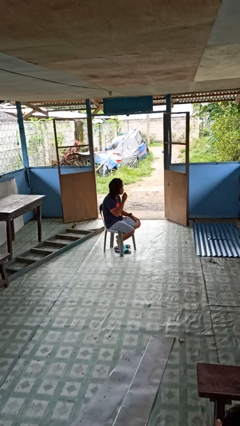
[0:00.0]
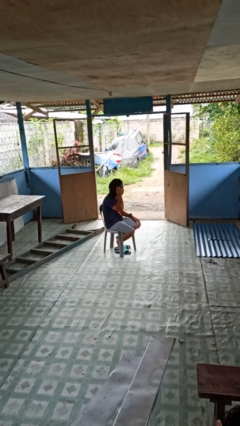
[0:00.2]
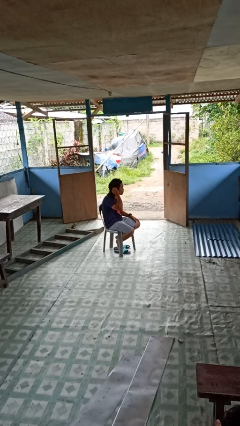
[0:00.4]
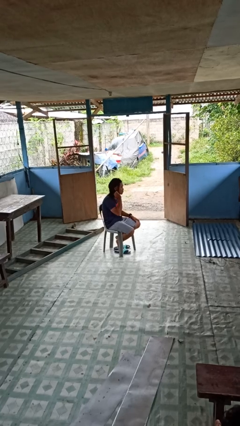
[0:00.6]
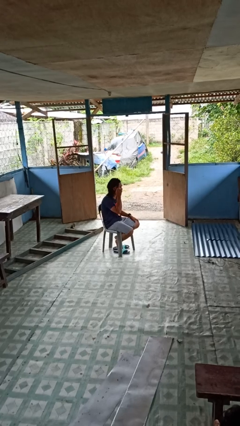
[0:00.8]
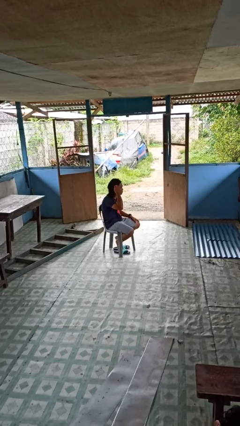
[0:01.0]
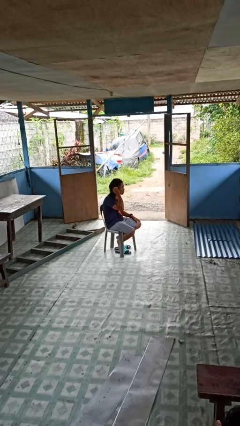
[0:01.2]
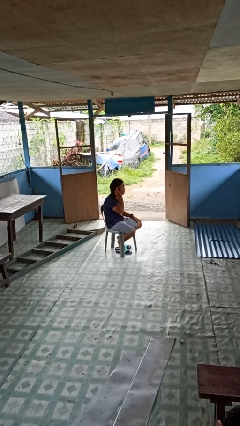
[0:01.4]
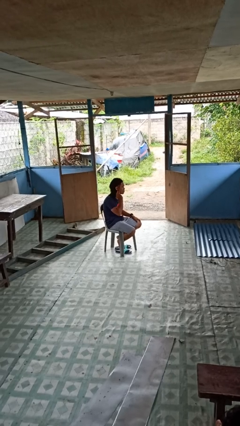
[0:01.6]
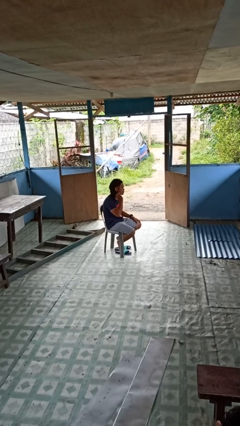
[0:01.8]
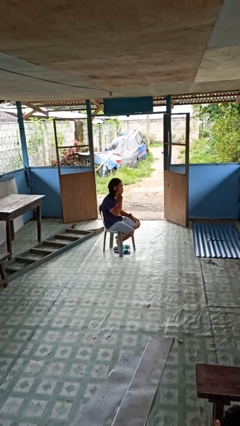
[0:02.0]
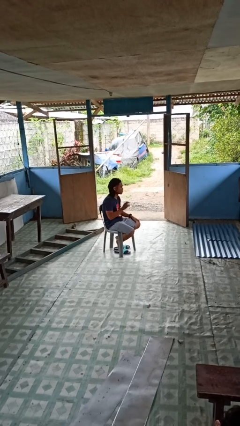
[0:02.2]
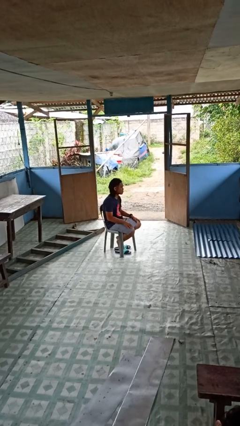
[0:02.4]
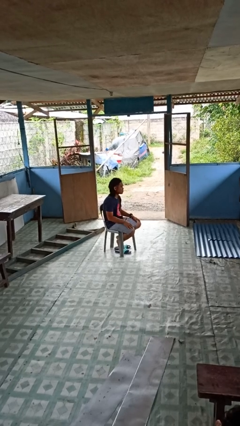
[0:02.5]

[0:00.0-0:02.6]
person strokes hair

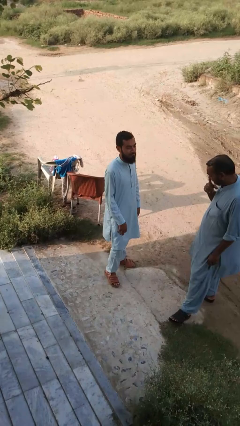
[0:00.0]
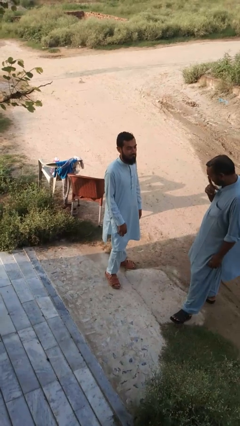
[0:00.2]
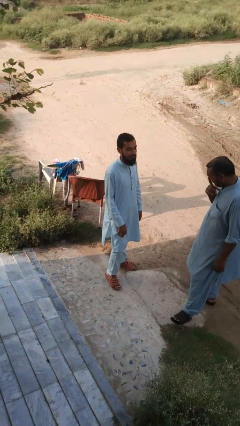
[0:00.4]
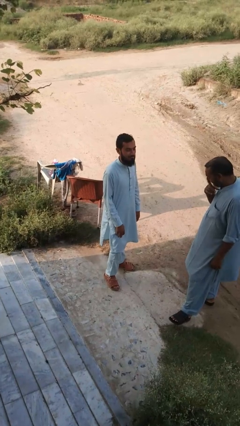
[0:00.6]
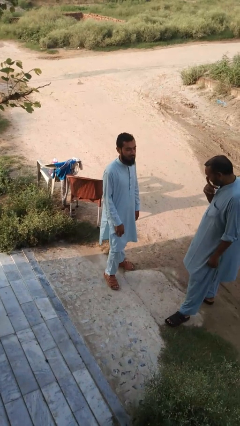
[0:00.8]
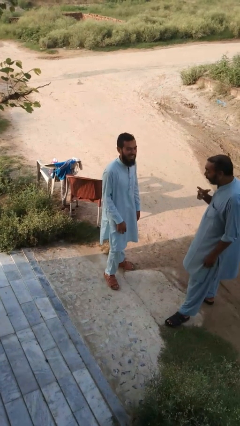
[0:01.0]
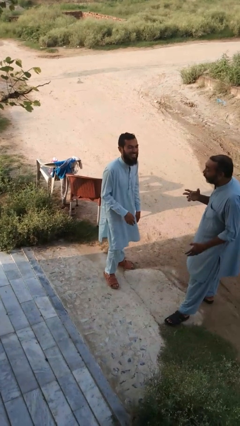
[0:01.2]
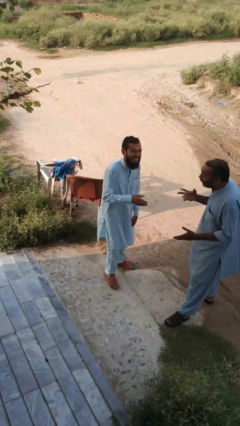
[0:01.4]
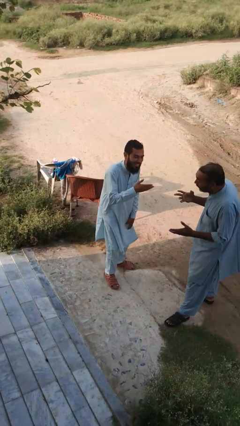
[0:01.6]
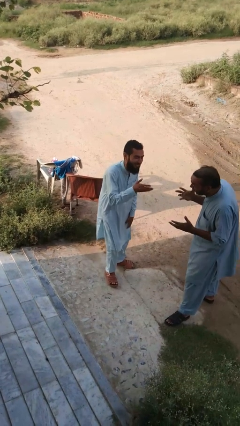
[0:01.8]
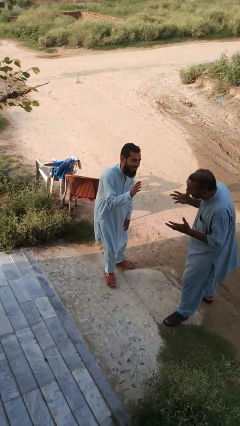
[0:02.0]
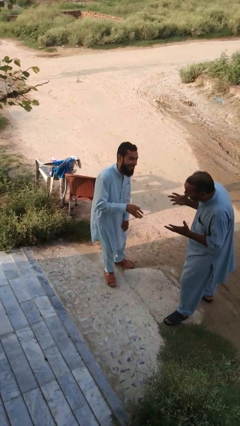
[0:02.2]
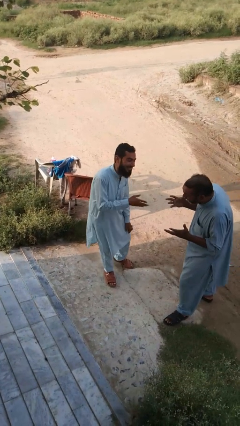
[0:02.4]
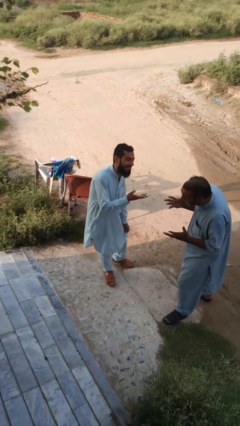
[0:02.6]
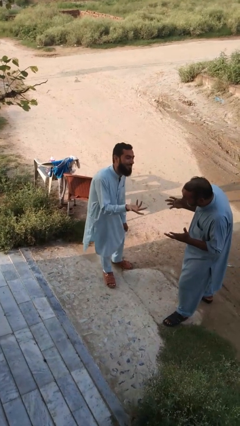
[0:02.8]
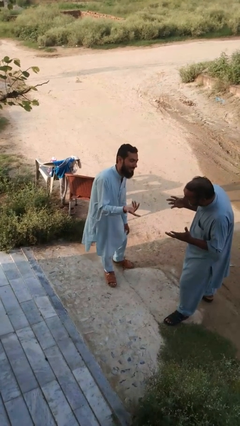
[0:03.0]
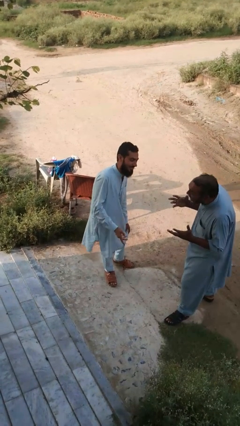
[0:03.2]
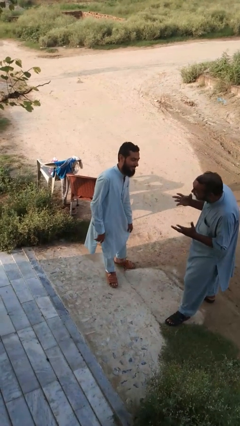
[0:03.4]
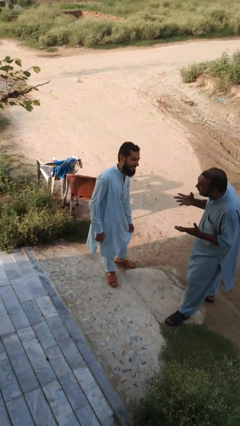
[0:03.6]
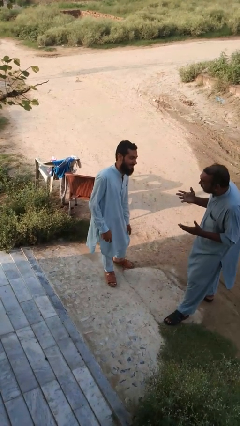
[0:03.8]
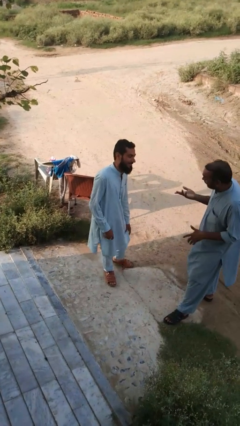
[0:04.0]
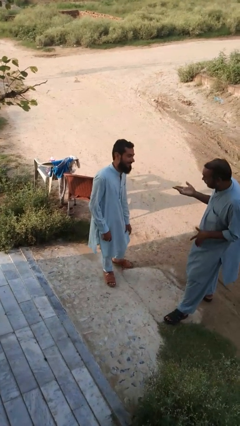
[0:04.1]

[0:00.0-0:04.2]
person laughs with person

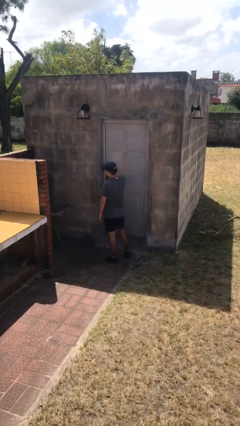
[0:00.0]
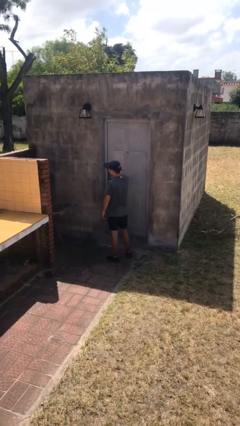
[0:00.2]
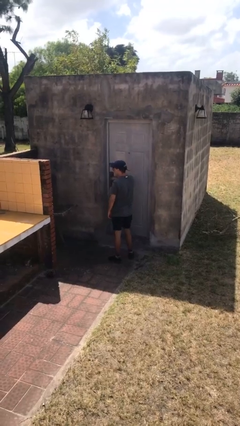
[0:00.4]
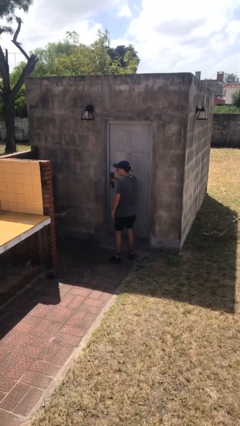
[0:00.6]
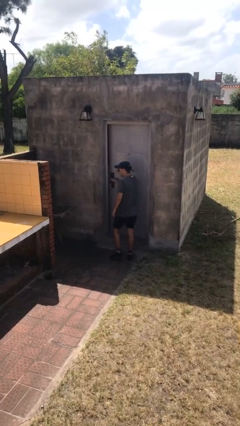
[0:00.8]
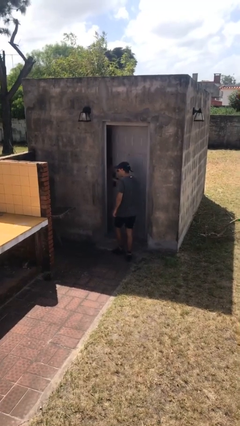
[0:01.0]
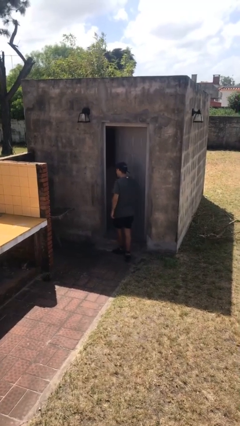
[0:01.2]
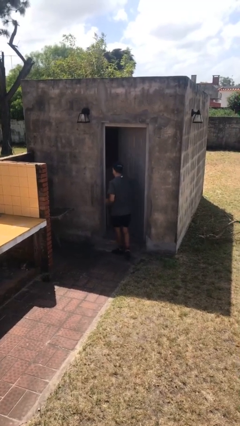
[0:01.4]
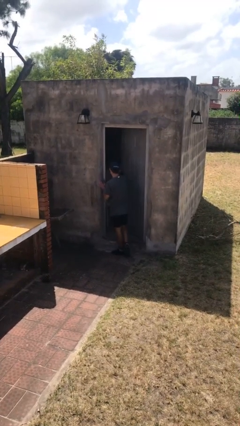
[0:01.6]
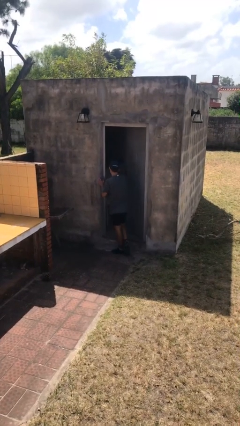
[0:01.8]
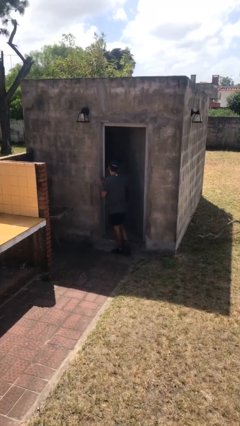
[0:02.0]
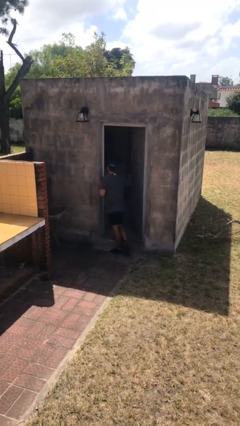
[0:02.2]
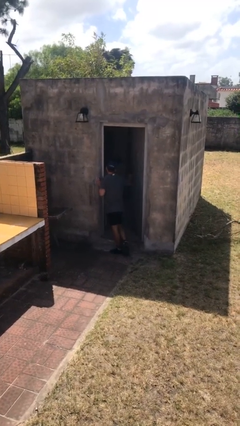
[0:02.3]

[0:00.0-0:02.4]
person opens facility door

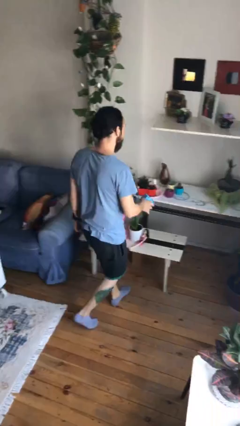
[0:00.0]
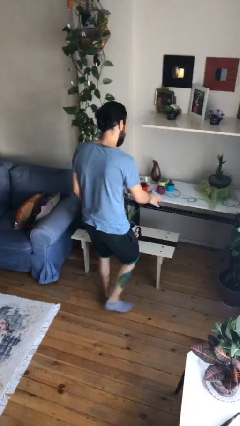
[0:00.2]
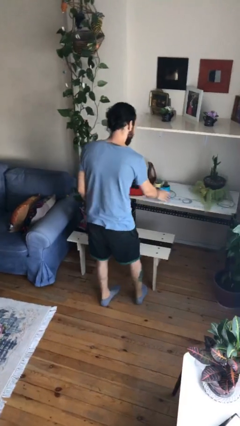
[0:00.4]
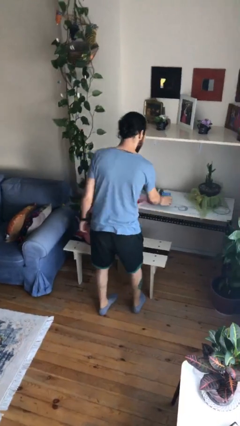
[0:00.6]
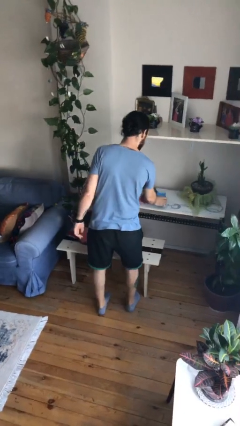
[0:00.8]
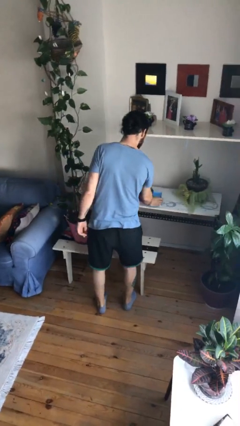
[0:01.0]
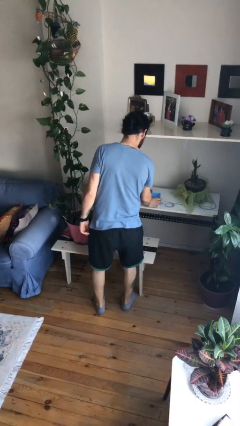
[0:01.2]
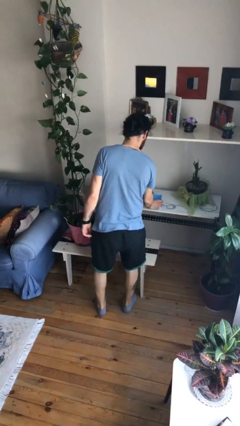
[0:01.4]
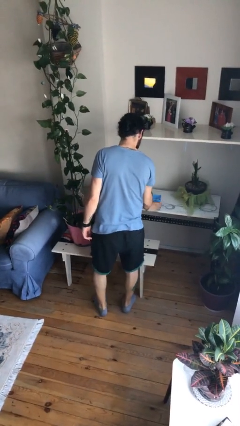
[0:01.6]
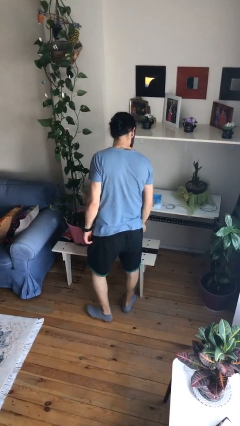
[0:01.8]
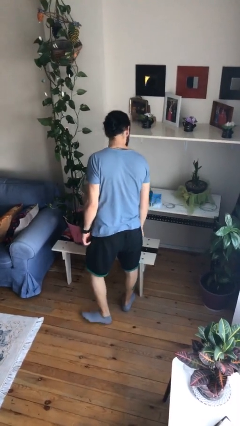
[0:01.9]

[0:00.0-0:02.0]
person puts down object on table

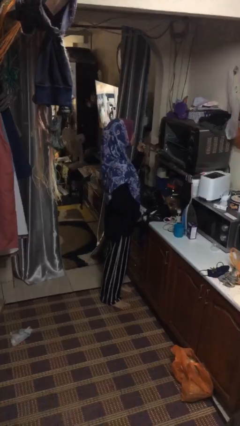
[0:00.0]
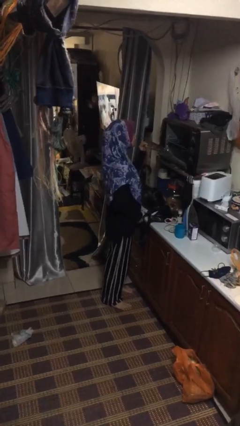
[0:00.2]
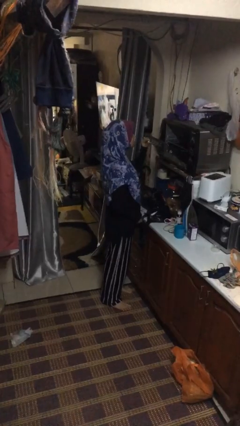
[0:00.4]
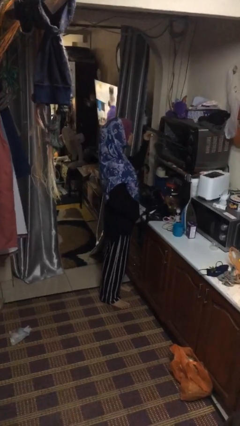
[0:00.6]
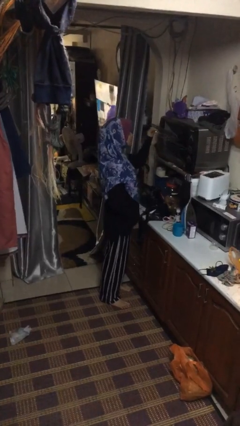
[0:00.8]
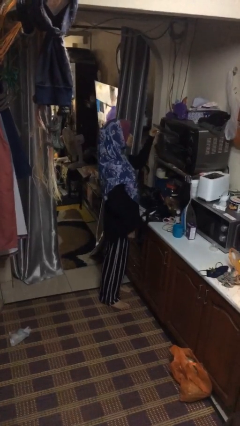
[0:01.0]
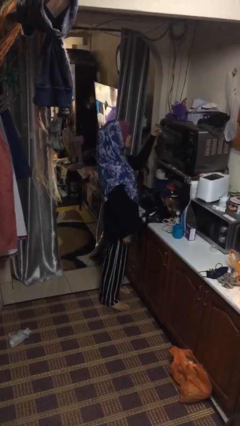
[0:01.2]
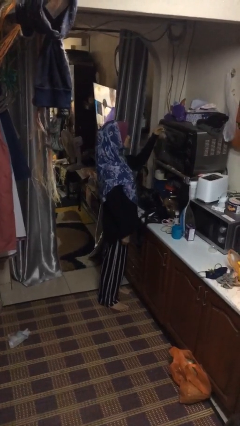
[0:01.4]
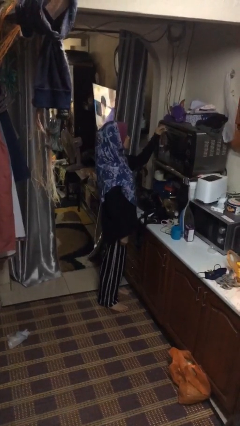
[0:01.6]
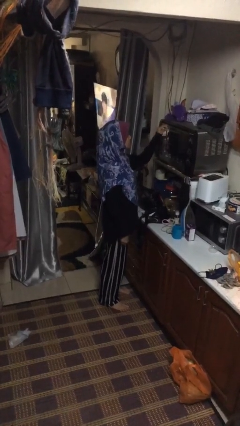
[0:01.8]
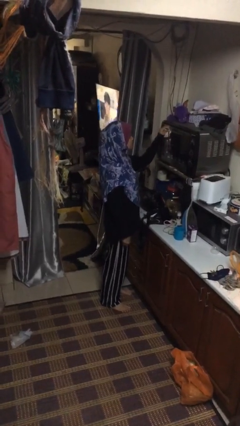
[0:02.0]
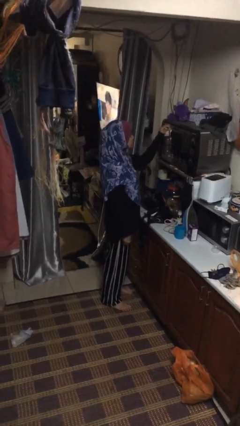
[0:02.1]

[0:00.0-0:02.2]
person closes oven door

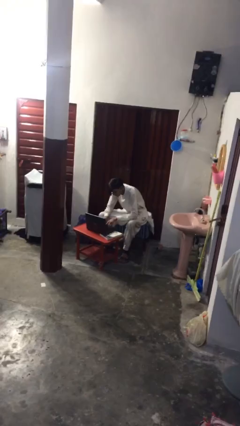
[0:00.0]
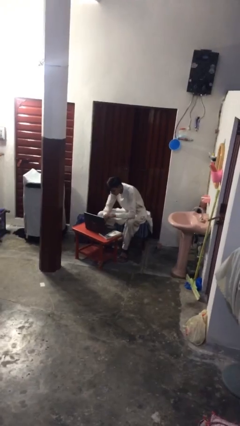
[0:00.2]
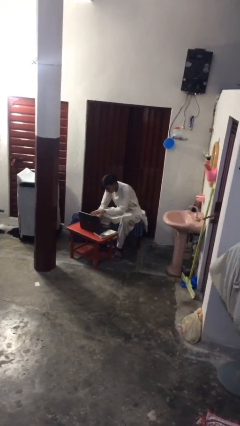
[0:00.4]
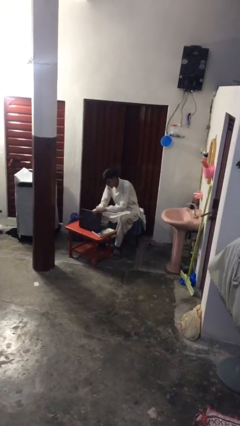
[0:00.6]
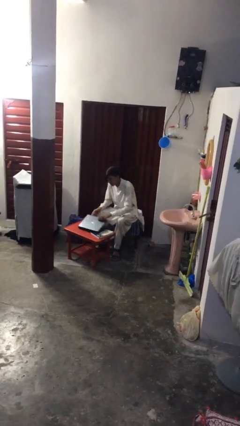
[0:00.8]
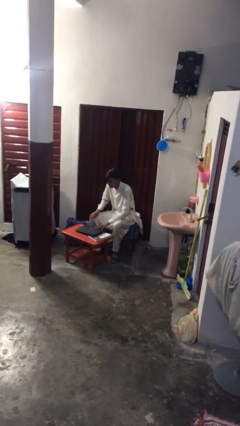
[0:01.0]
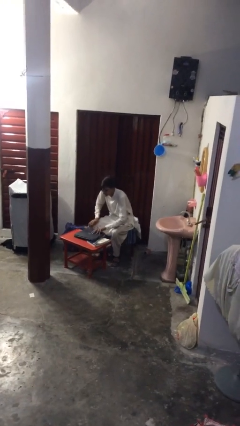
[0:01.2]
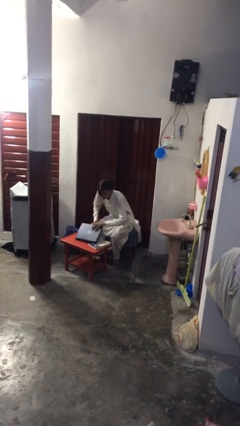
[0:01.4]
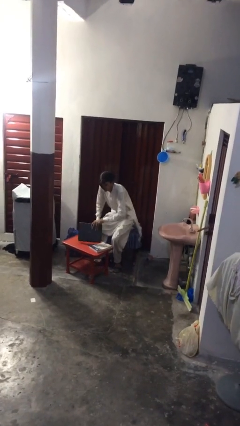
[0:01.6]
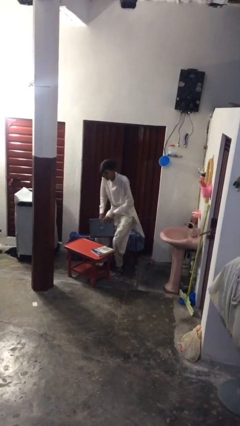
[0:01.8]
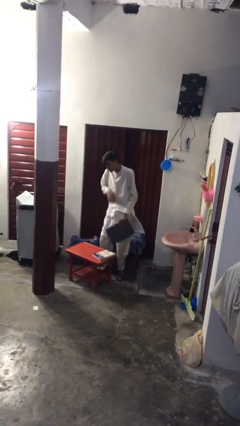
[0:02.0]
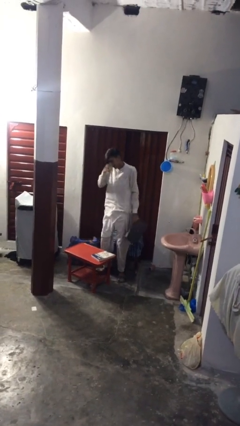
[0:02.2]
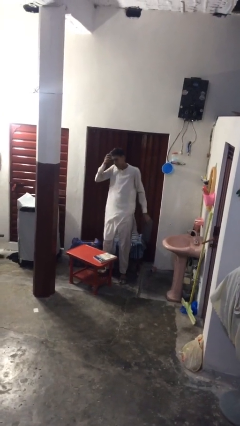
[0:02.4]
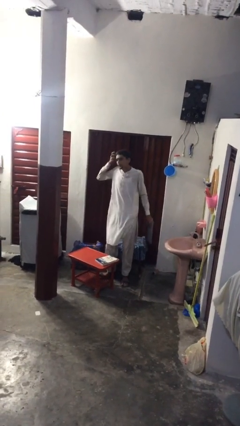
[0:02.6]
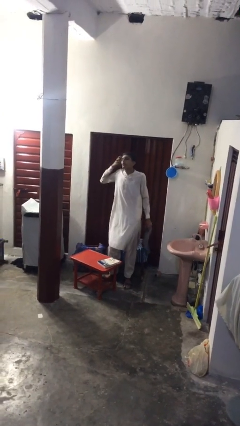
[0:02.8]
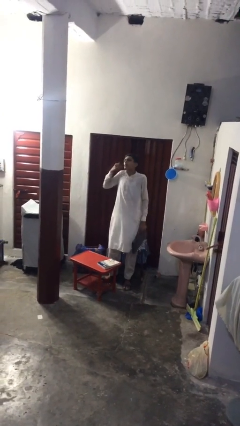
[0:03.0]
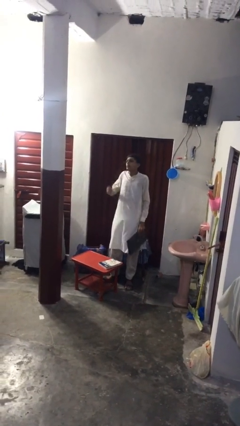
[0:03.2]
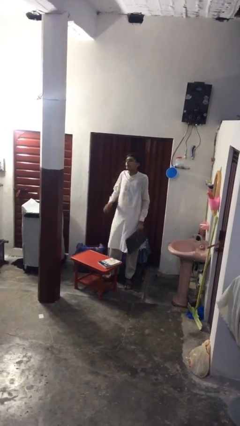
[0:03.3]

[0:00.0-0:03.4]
person stands up

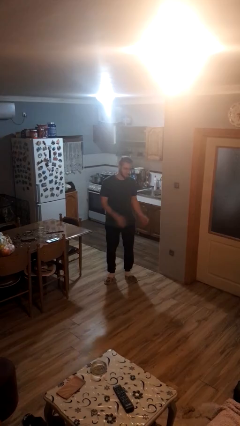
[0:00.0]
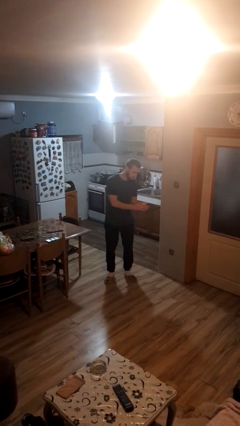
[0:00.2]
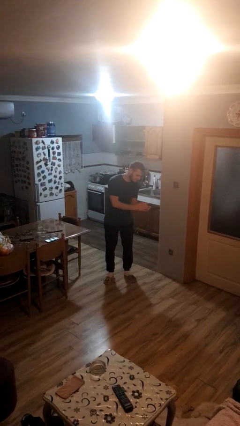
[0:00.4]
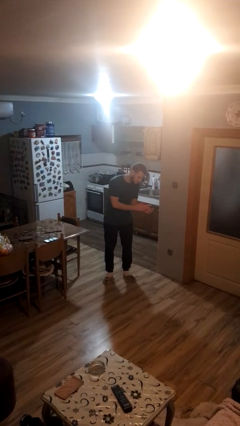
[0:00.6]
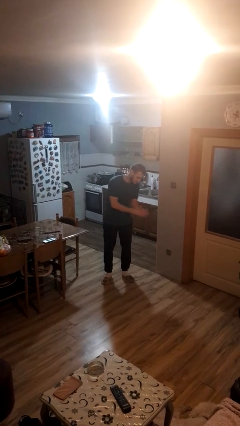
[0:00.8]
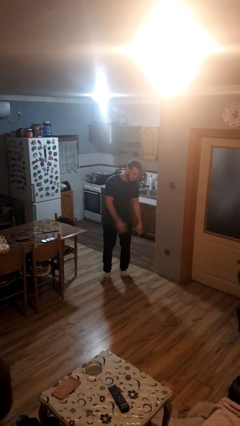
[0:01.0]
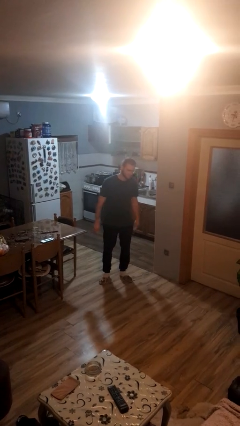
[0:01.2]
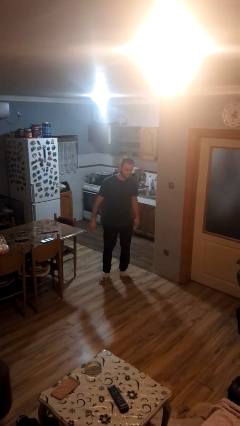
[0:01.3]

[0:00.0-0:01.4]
person claps hands
